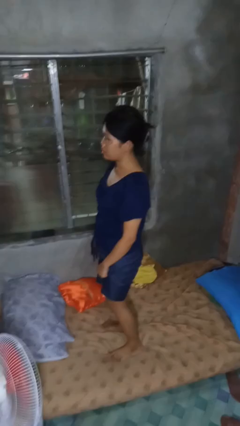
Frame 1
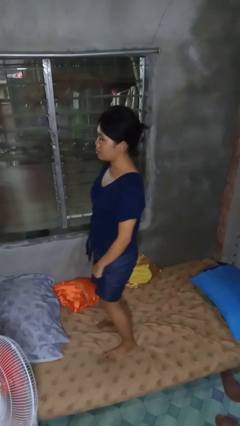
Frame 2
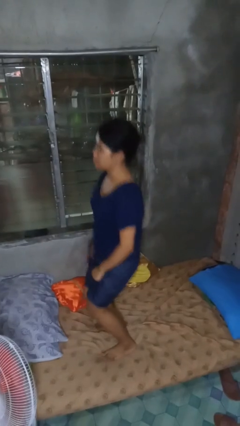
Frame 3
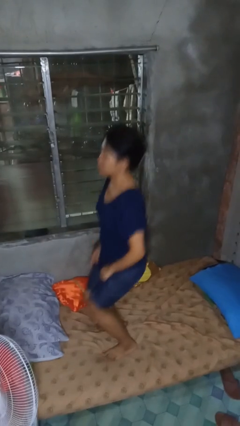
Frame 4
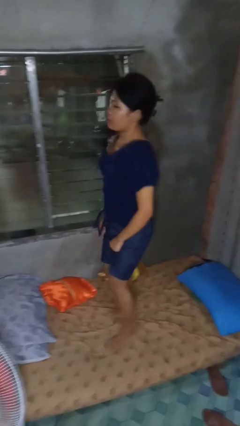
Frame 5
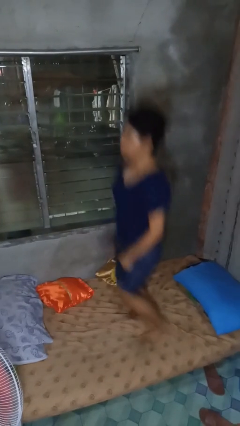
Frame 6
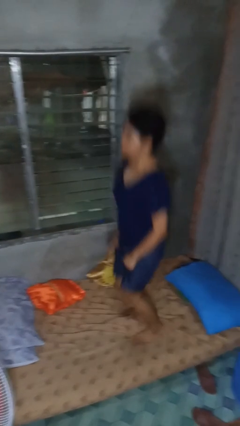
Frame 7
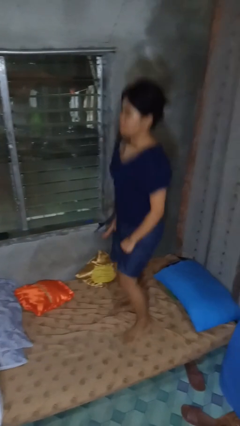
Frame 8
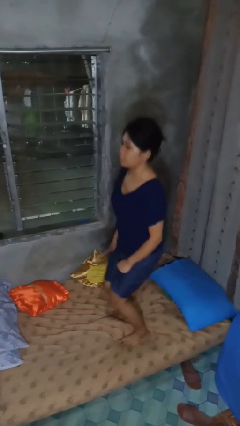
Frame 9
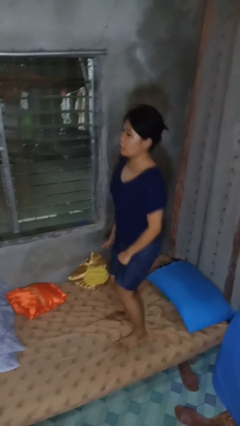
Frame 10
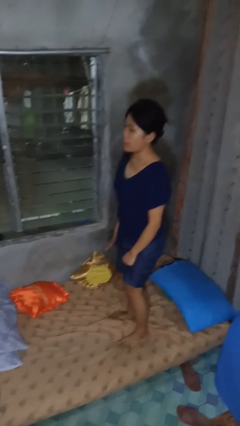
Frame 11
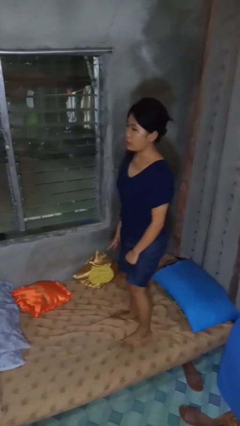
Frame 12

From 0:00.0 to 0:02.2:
person jumps on bed

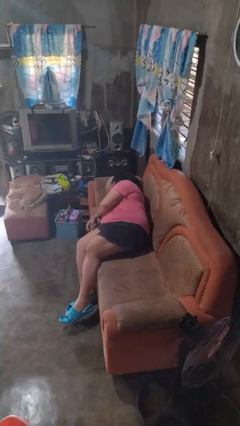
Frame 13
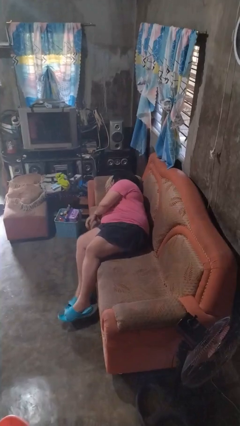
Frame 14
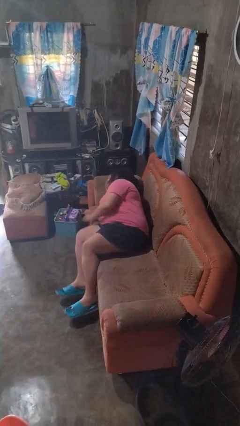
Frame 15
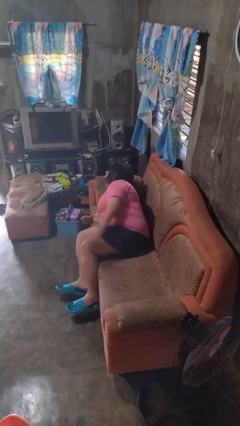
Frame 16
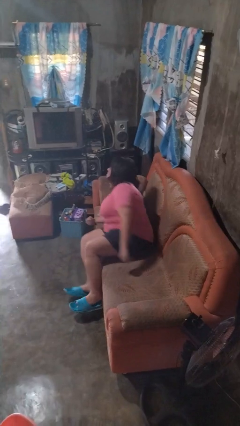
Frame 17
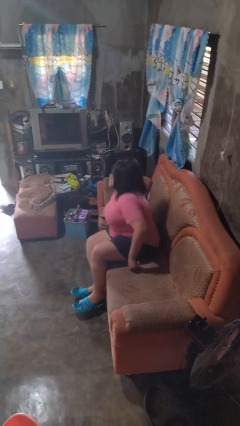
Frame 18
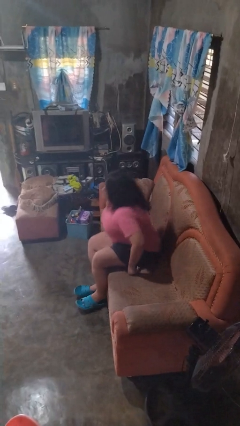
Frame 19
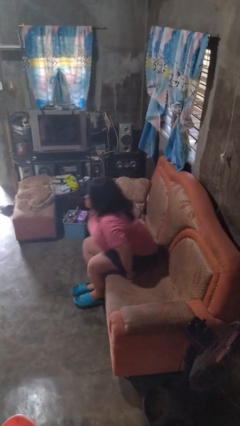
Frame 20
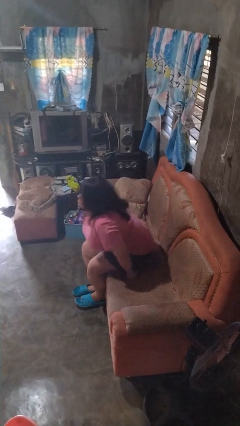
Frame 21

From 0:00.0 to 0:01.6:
person stands up

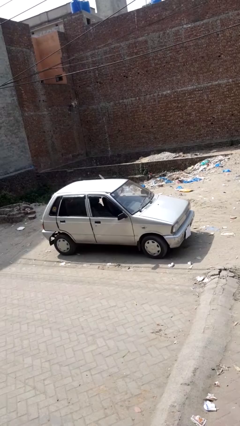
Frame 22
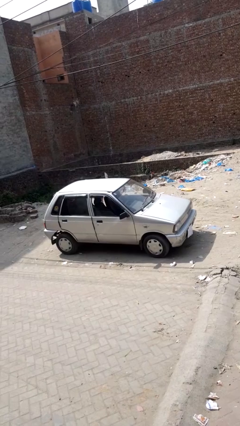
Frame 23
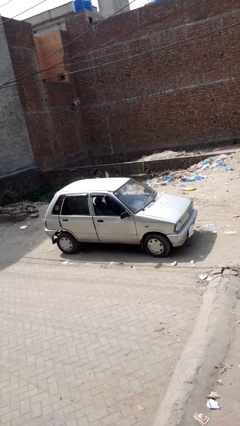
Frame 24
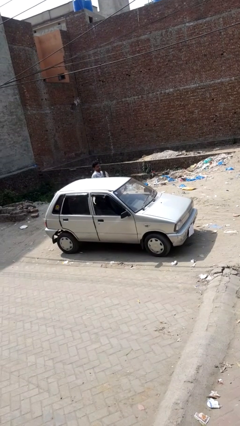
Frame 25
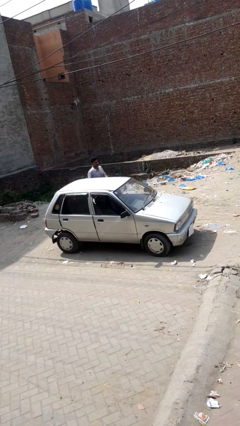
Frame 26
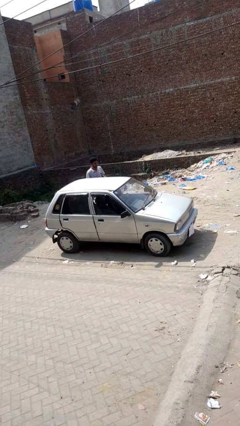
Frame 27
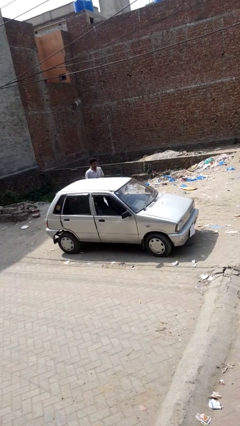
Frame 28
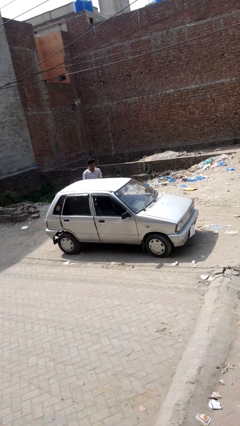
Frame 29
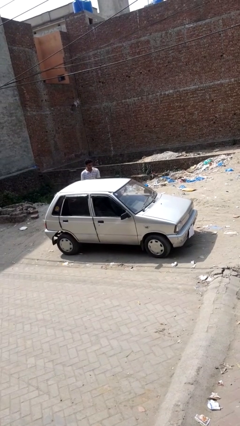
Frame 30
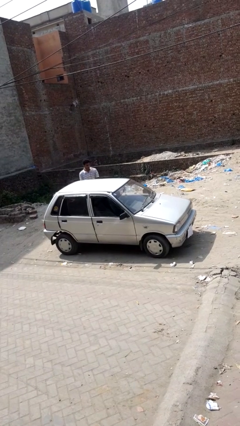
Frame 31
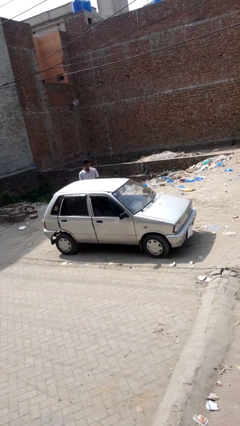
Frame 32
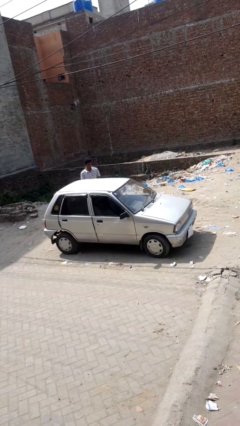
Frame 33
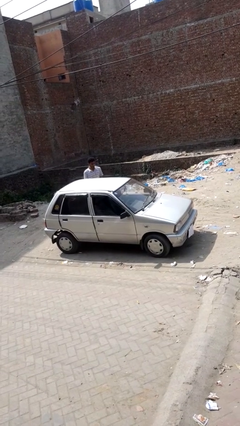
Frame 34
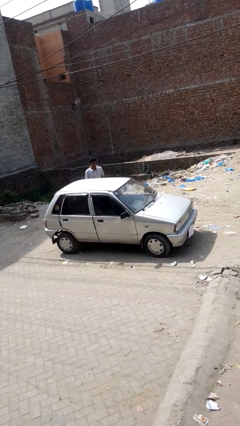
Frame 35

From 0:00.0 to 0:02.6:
car drops off person

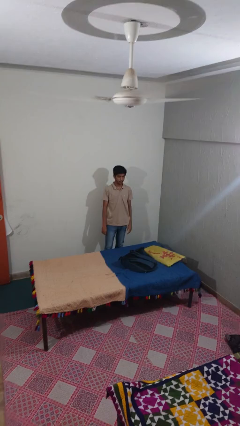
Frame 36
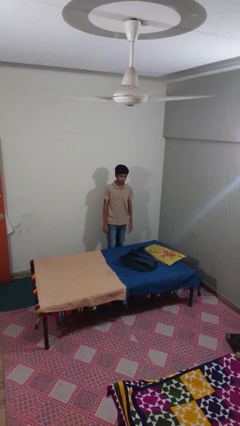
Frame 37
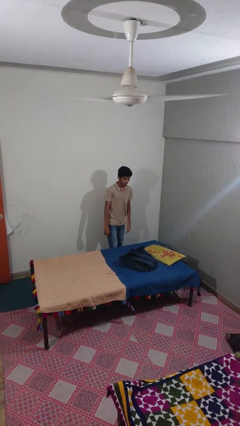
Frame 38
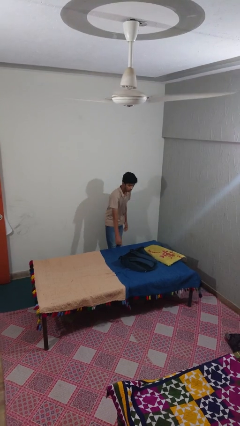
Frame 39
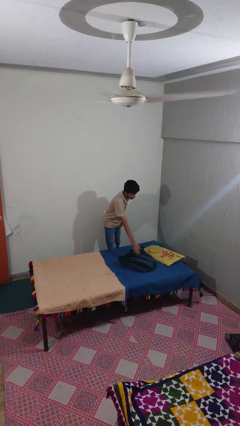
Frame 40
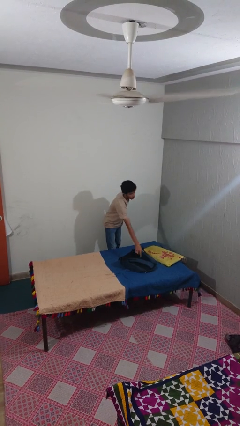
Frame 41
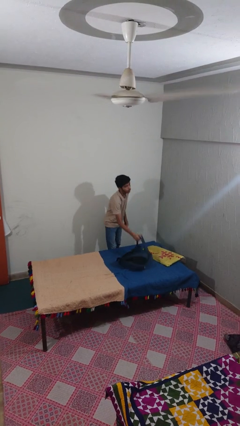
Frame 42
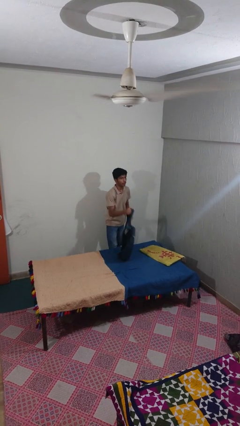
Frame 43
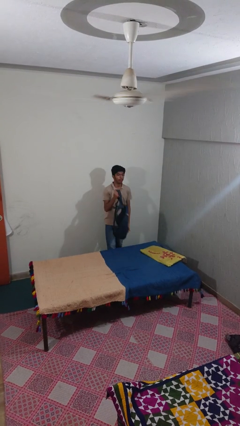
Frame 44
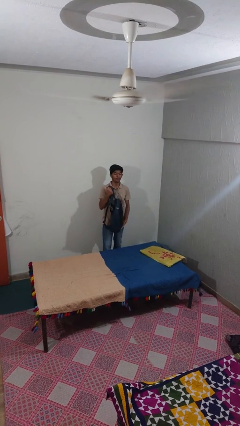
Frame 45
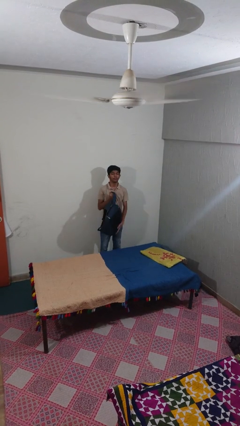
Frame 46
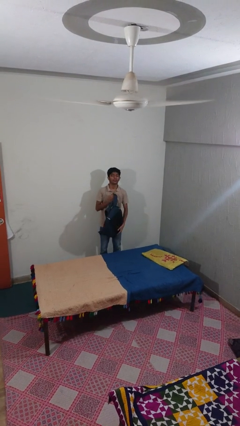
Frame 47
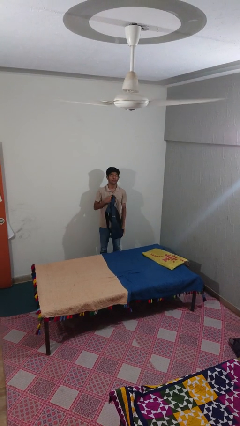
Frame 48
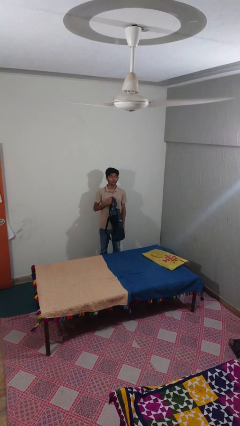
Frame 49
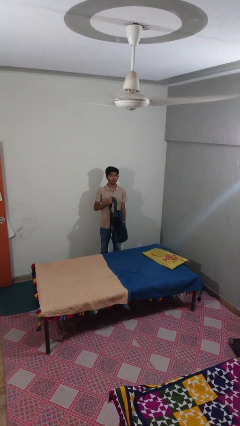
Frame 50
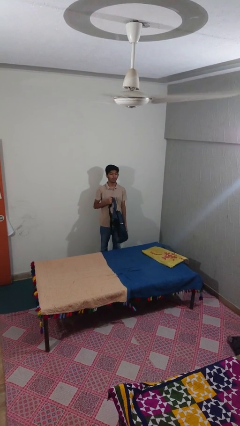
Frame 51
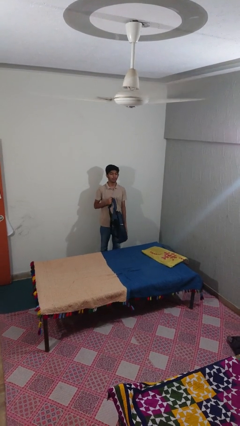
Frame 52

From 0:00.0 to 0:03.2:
person picks up object from bed

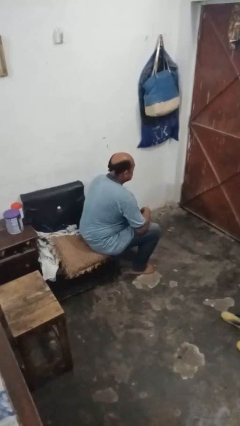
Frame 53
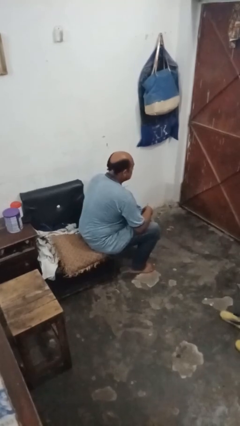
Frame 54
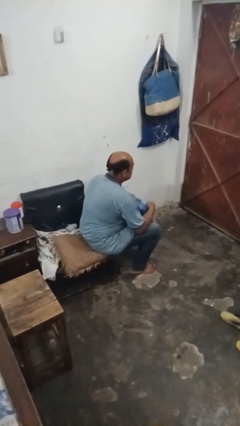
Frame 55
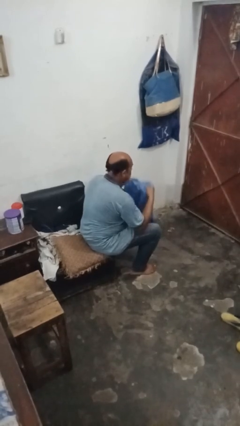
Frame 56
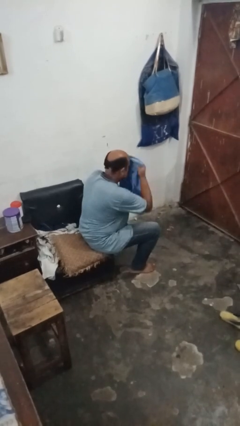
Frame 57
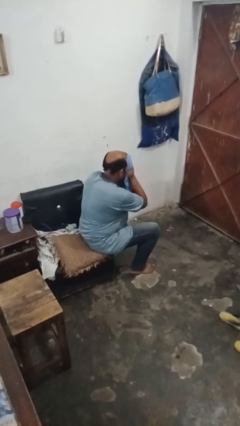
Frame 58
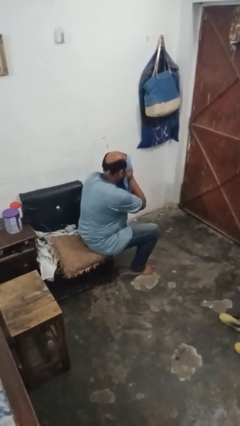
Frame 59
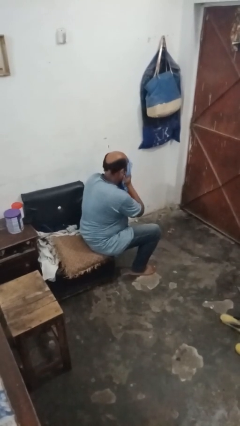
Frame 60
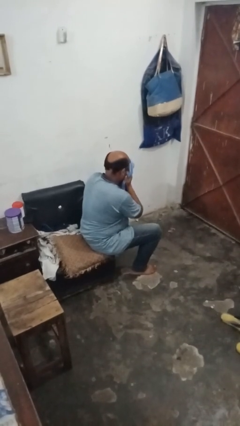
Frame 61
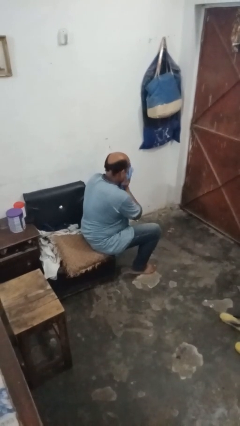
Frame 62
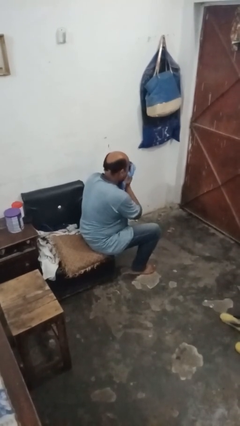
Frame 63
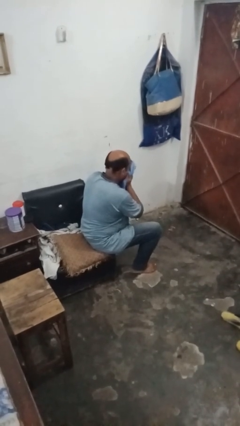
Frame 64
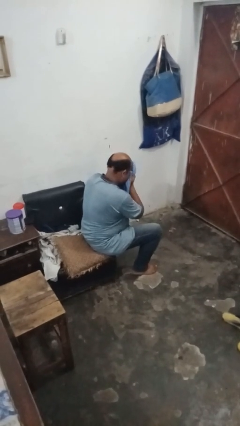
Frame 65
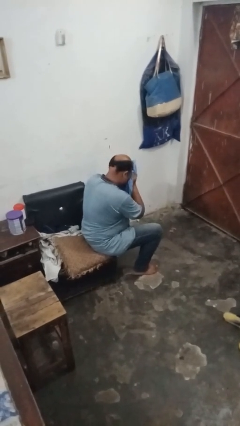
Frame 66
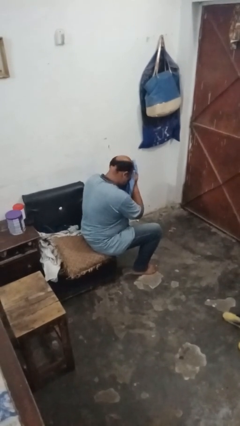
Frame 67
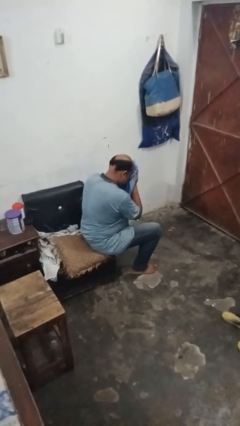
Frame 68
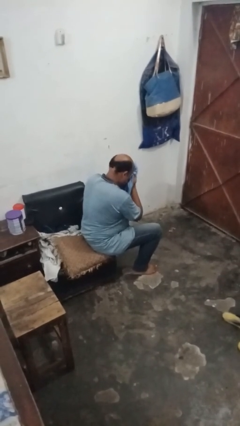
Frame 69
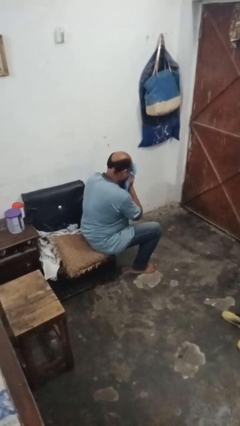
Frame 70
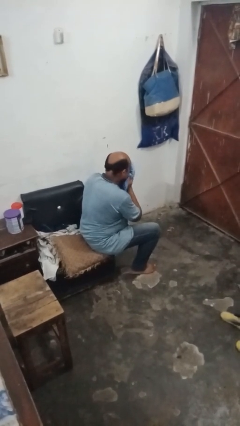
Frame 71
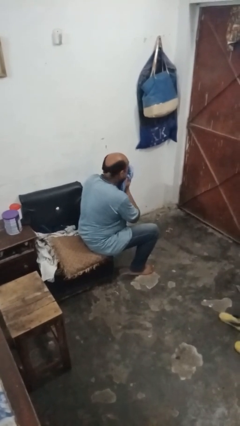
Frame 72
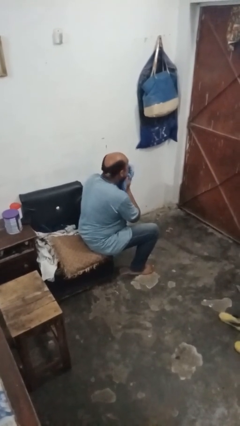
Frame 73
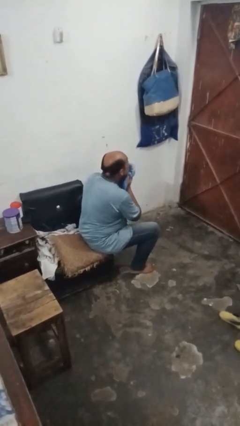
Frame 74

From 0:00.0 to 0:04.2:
person wipes mouth with napkin

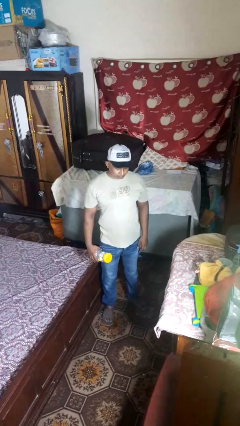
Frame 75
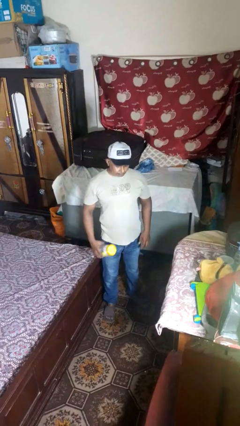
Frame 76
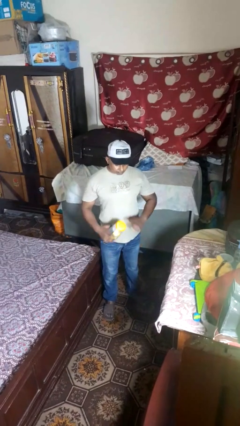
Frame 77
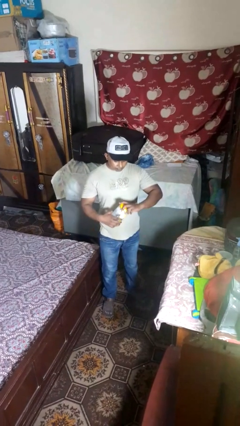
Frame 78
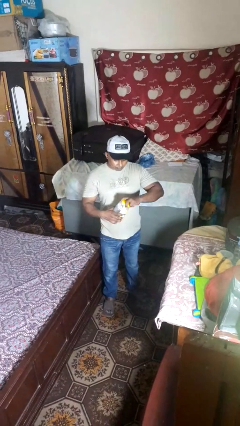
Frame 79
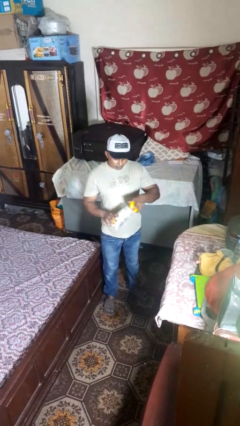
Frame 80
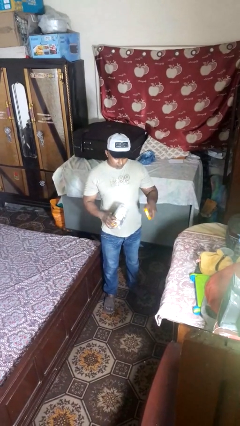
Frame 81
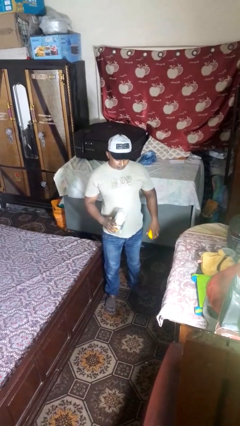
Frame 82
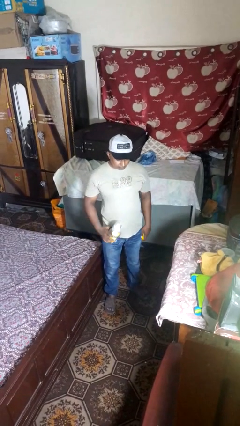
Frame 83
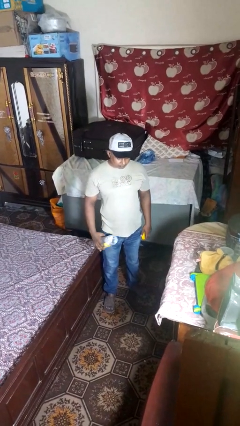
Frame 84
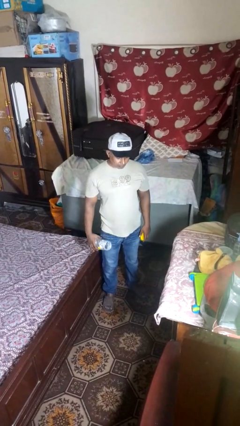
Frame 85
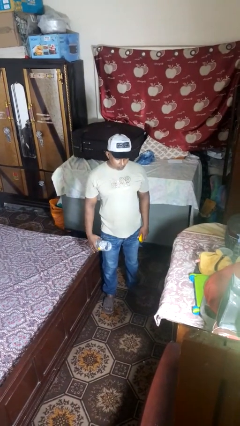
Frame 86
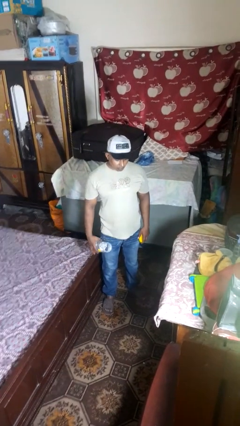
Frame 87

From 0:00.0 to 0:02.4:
person opens jar

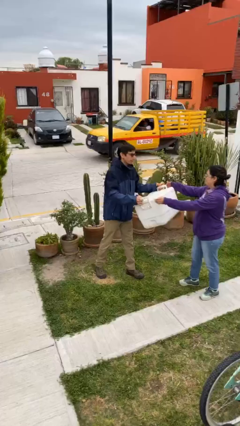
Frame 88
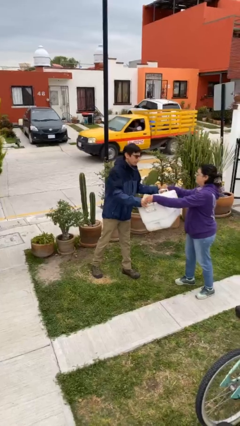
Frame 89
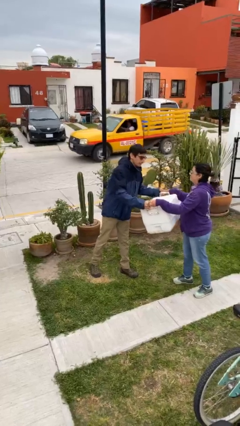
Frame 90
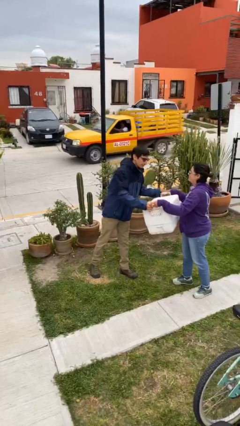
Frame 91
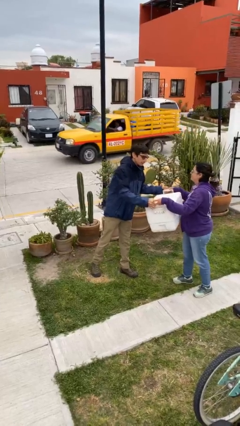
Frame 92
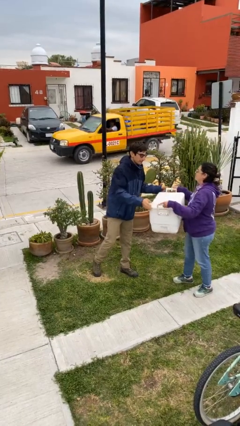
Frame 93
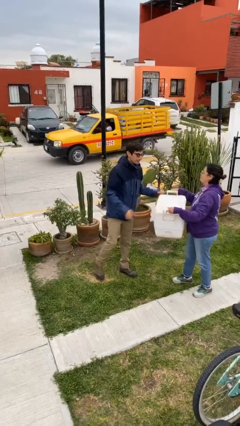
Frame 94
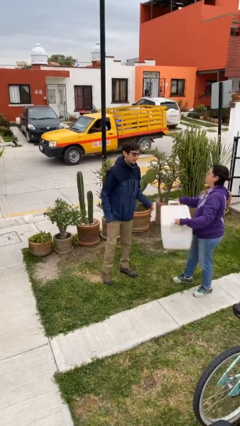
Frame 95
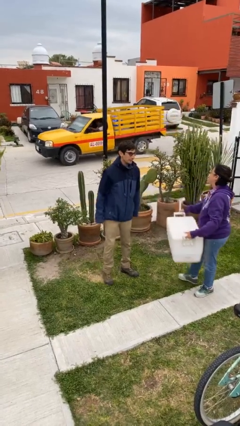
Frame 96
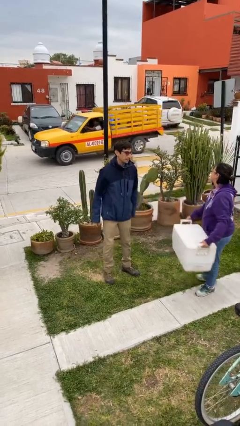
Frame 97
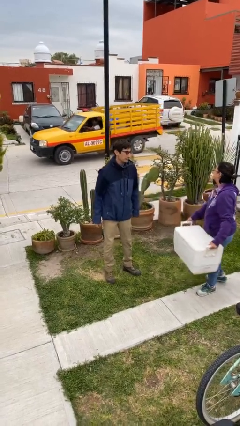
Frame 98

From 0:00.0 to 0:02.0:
person transfers object to person
